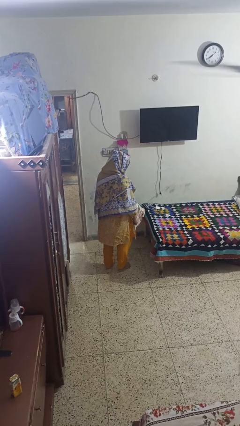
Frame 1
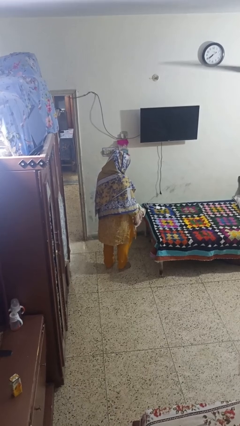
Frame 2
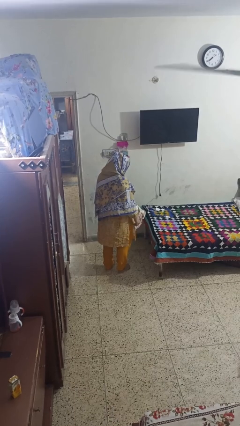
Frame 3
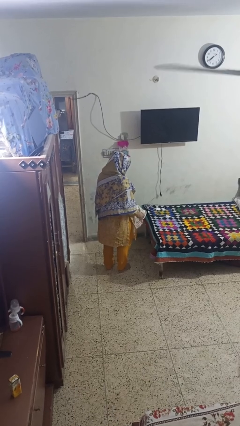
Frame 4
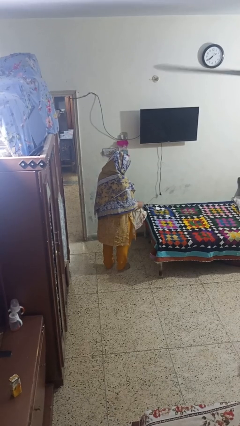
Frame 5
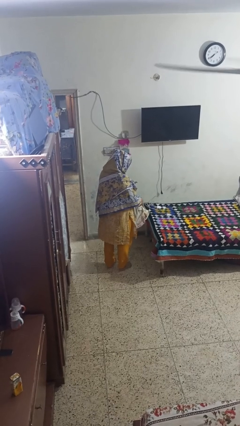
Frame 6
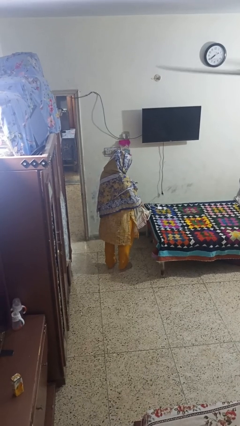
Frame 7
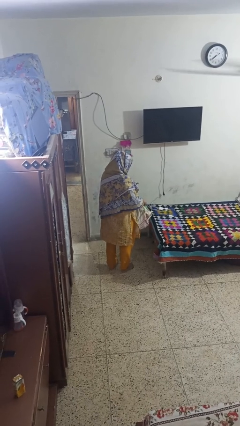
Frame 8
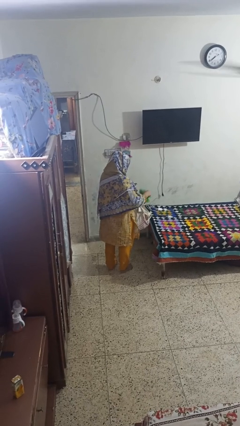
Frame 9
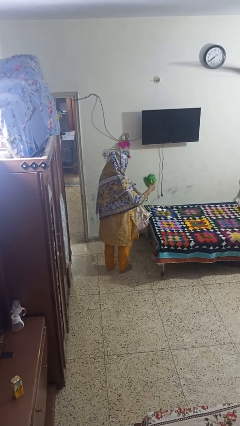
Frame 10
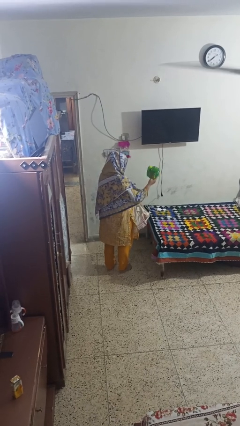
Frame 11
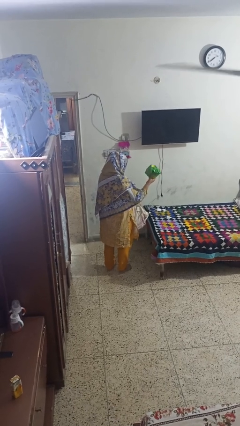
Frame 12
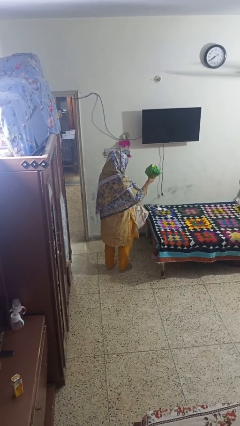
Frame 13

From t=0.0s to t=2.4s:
person takes object from bag

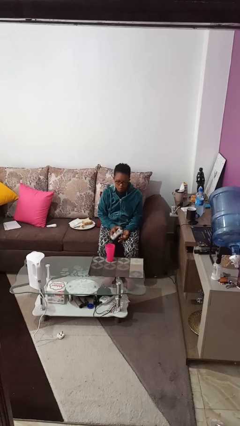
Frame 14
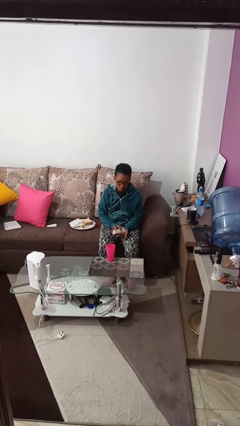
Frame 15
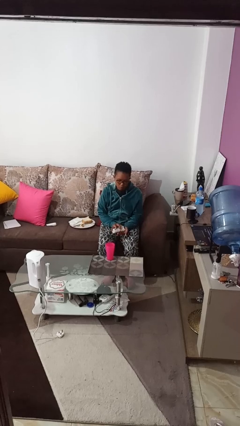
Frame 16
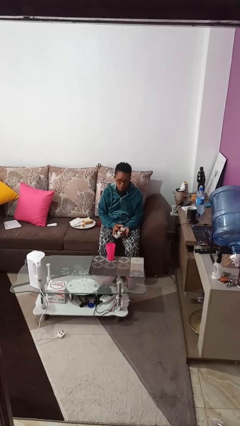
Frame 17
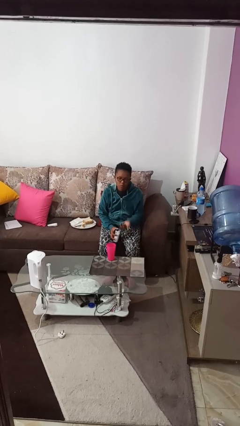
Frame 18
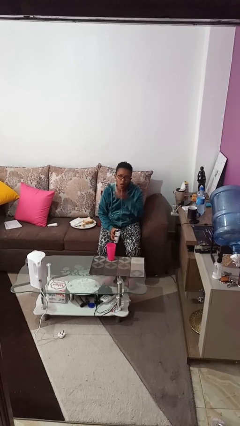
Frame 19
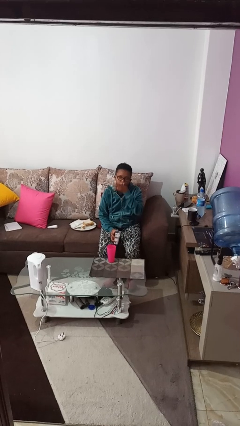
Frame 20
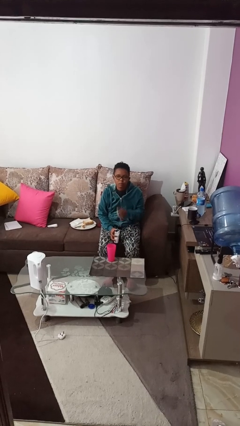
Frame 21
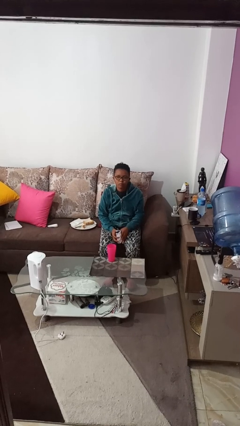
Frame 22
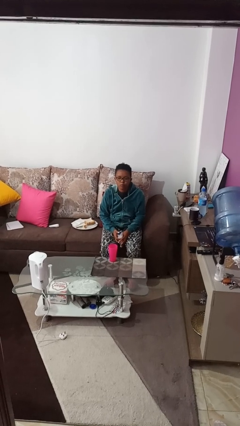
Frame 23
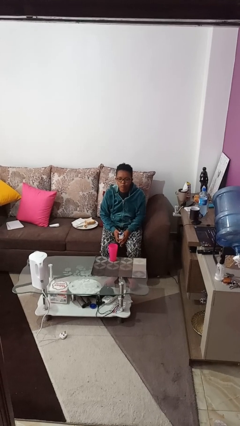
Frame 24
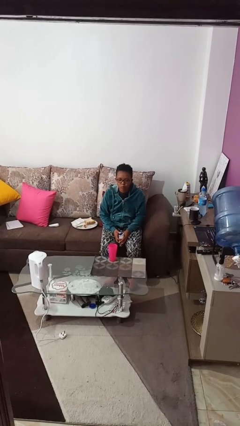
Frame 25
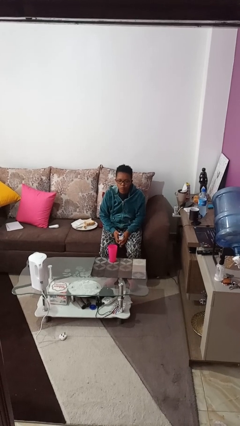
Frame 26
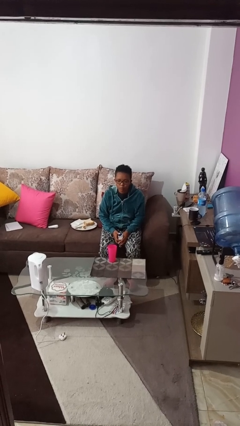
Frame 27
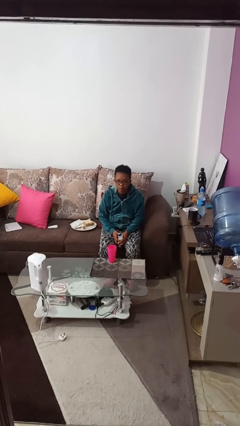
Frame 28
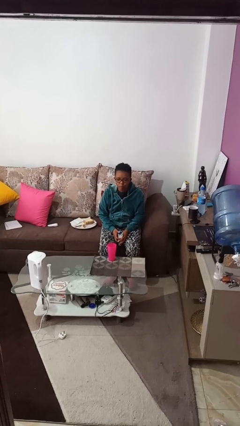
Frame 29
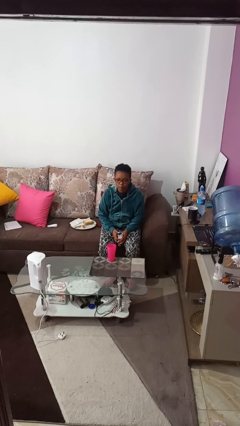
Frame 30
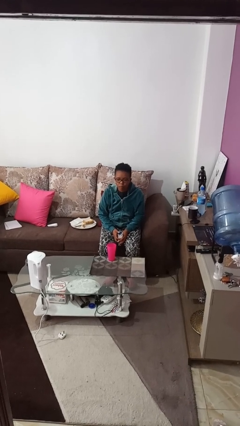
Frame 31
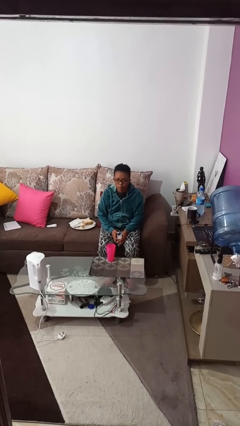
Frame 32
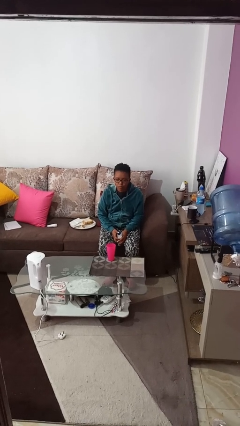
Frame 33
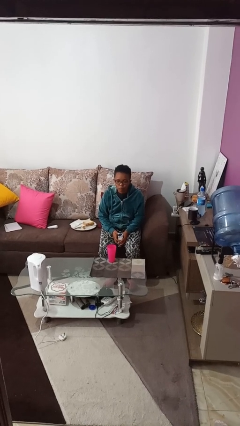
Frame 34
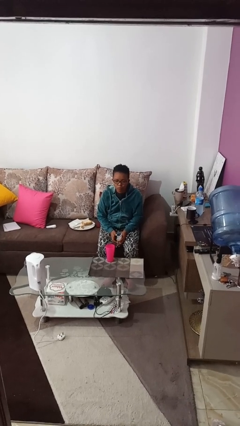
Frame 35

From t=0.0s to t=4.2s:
person takes medicine pills

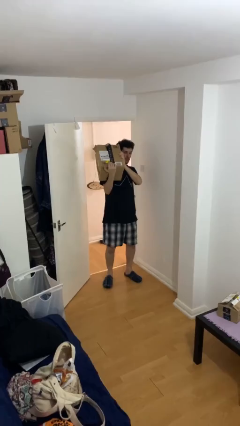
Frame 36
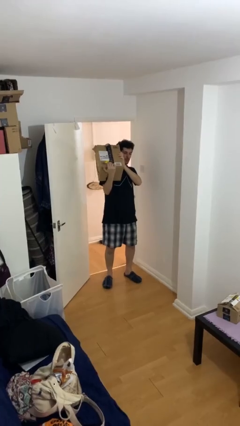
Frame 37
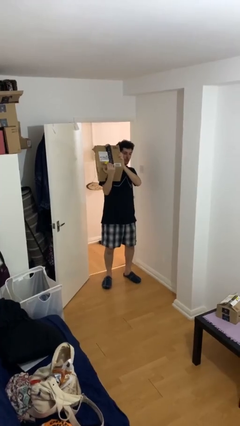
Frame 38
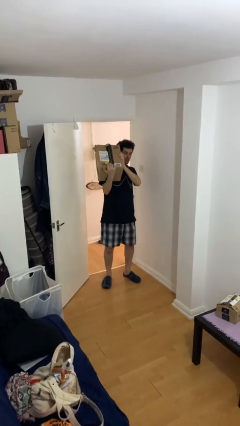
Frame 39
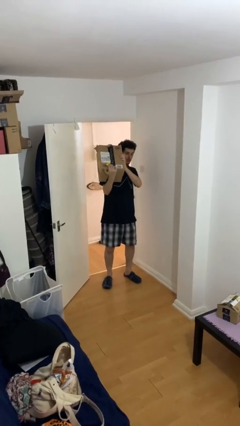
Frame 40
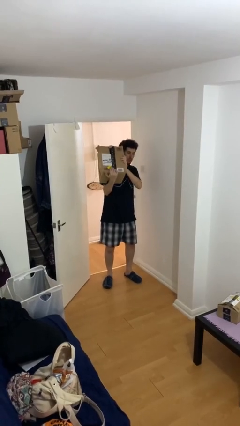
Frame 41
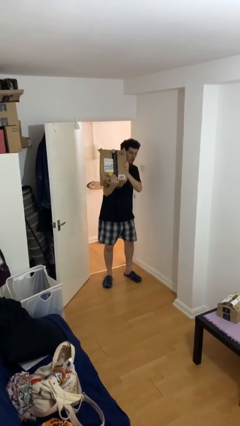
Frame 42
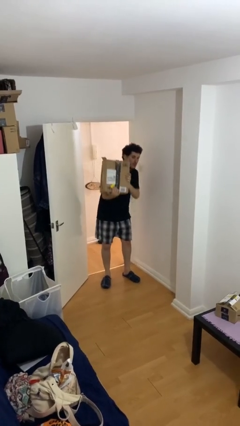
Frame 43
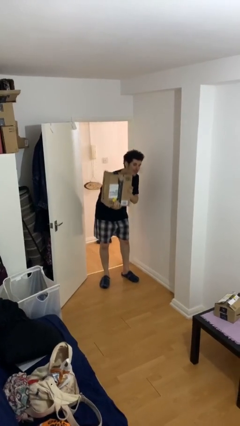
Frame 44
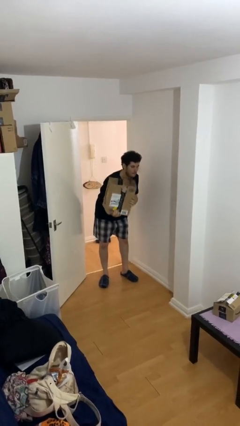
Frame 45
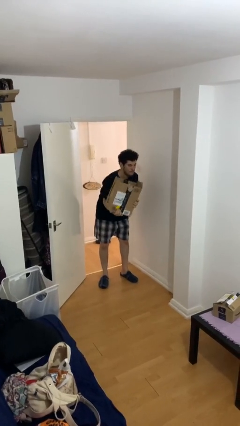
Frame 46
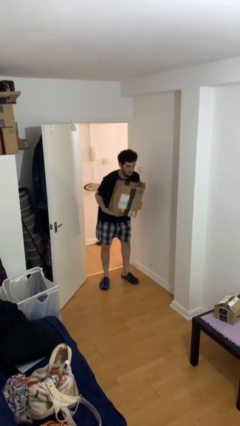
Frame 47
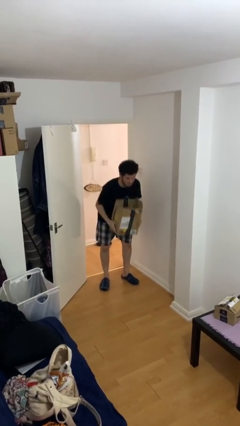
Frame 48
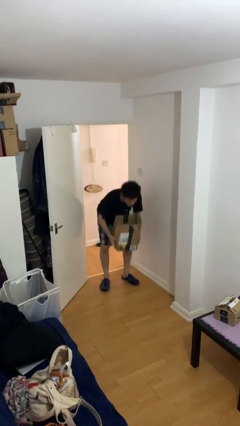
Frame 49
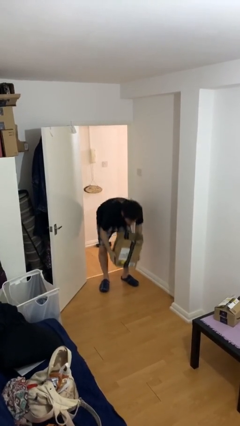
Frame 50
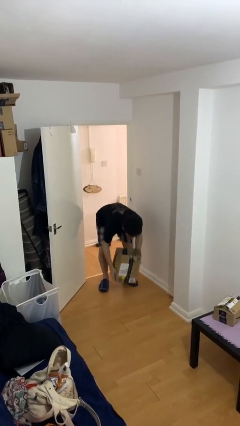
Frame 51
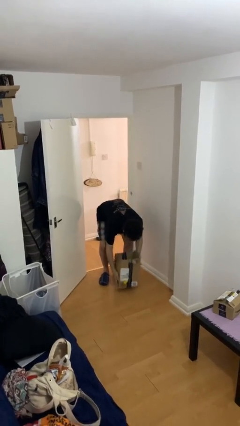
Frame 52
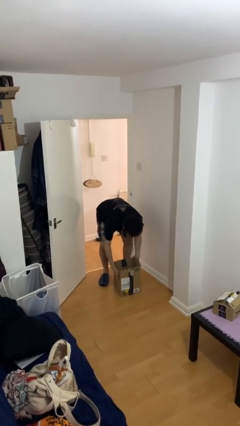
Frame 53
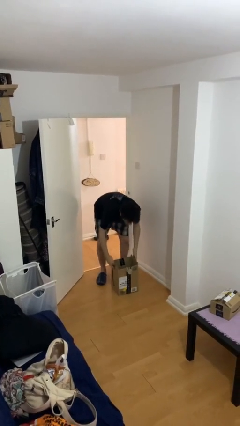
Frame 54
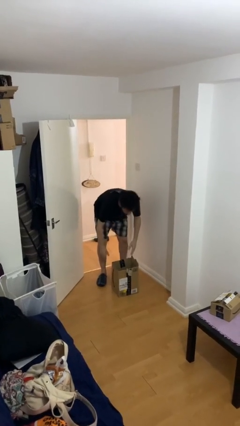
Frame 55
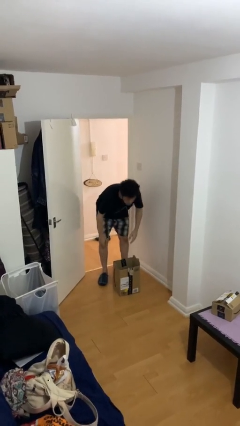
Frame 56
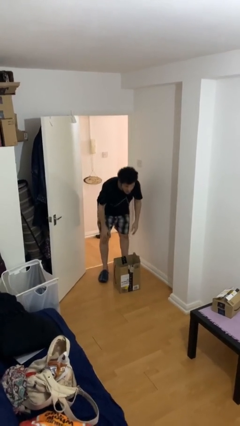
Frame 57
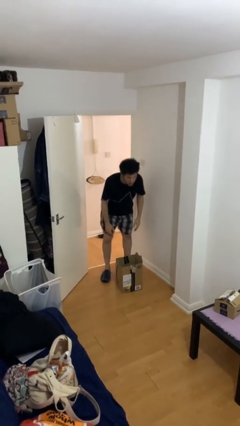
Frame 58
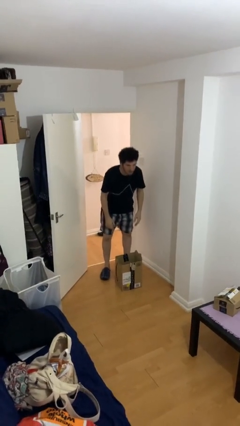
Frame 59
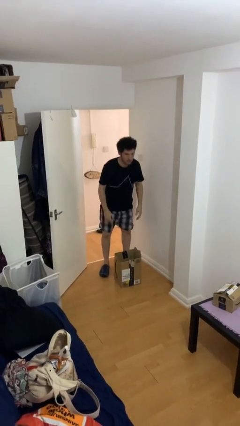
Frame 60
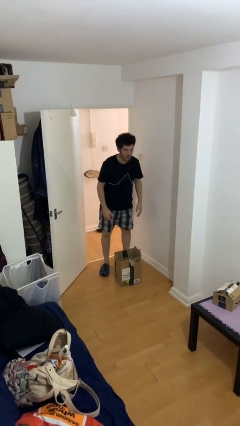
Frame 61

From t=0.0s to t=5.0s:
person puts down object on floor

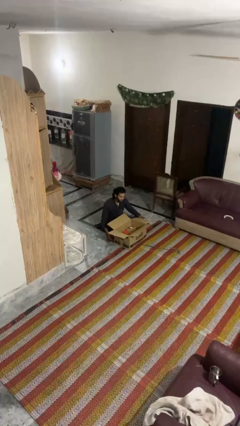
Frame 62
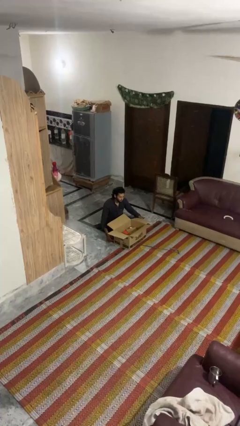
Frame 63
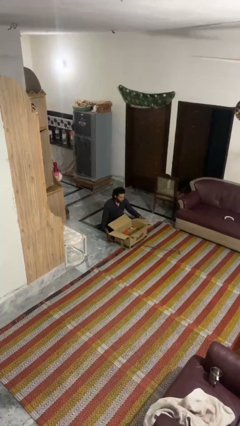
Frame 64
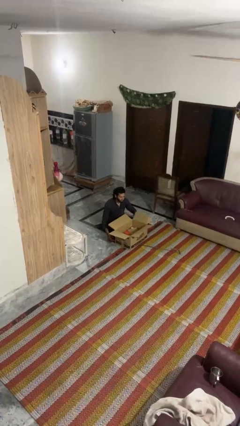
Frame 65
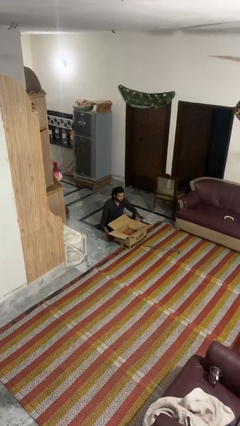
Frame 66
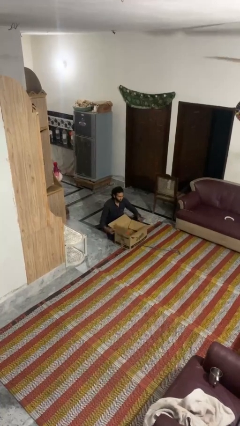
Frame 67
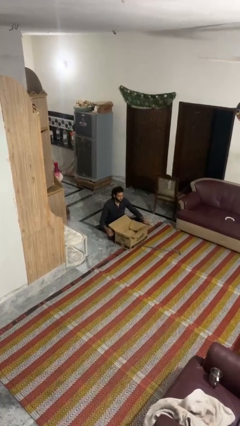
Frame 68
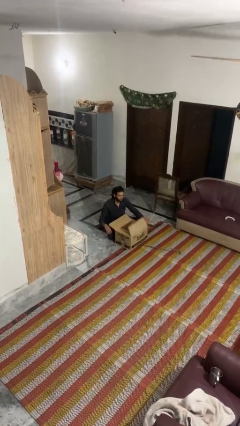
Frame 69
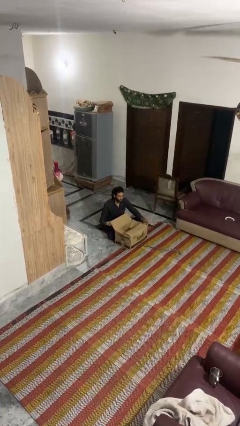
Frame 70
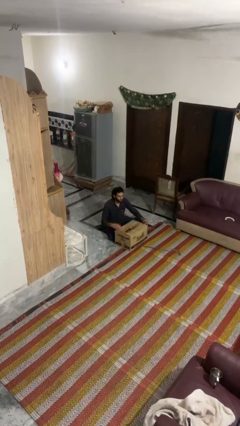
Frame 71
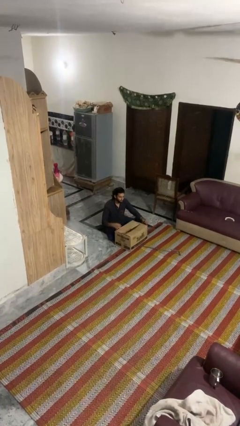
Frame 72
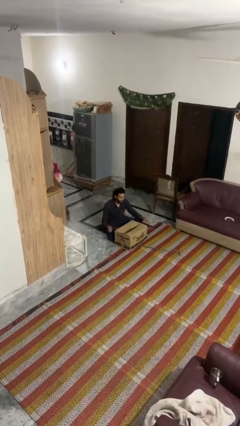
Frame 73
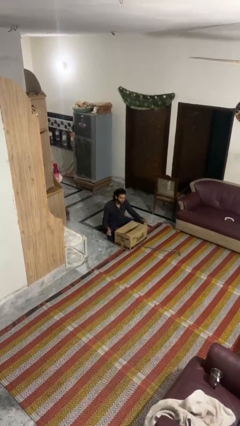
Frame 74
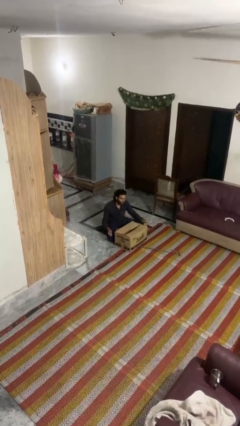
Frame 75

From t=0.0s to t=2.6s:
person closes box

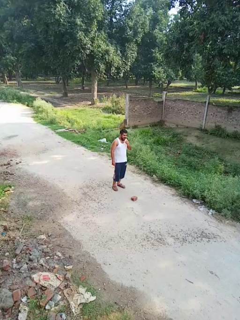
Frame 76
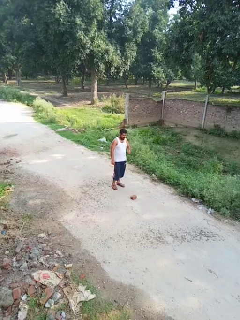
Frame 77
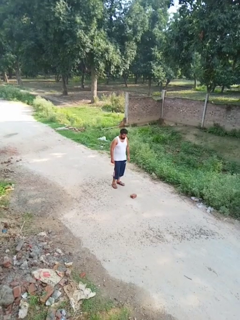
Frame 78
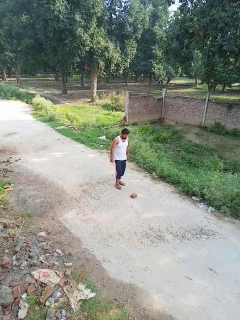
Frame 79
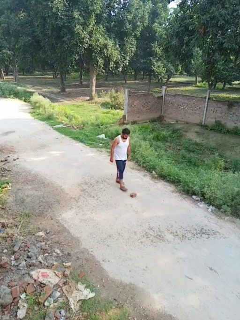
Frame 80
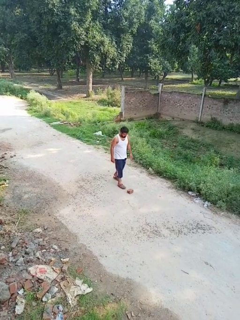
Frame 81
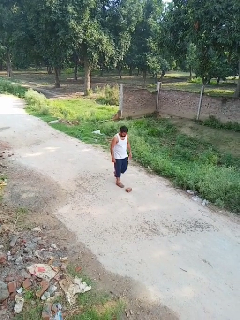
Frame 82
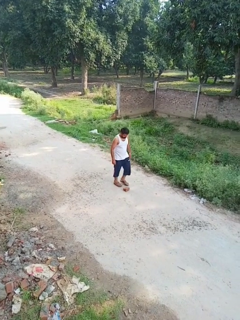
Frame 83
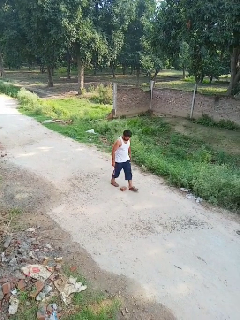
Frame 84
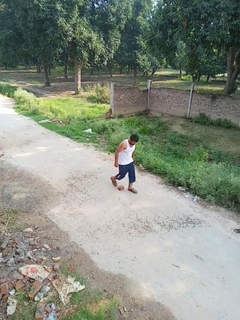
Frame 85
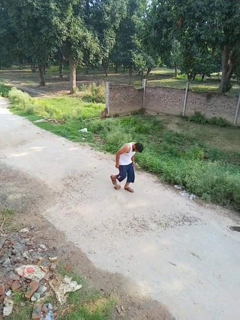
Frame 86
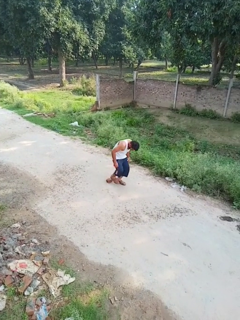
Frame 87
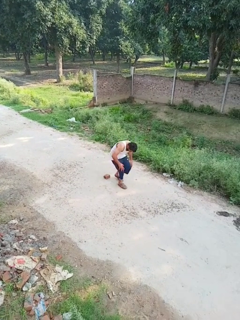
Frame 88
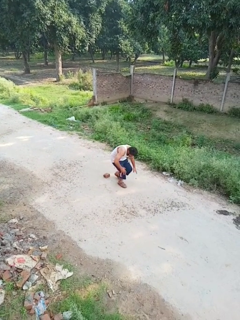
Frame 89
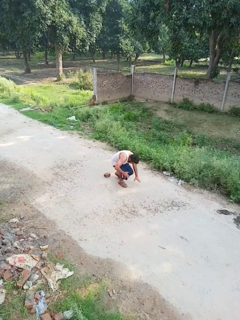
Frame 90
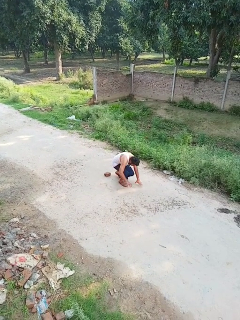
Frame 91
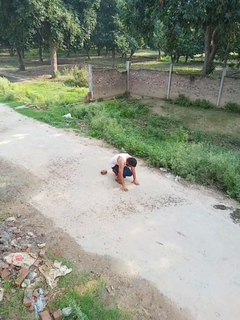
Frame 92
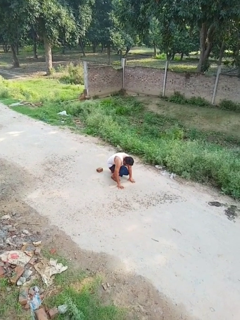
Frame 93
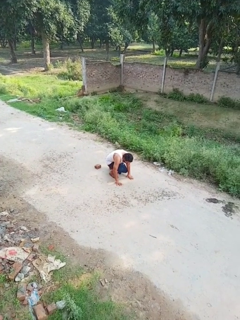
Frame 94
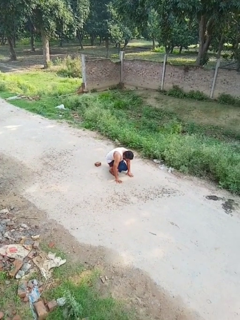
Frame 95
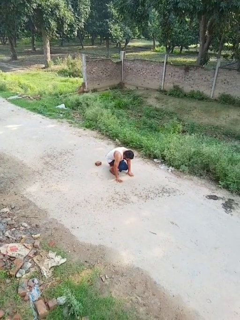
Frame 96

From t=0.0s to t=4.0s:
person trips on object on floor

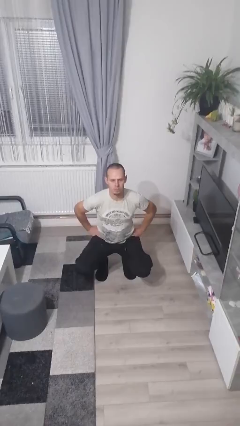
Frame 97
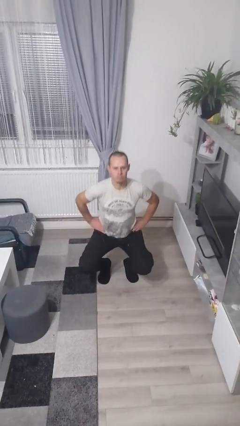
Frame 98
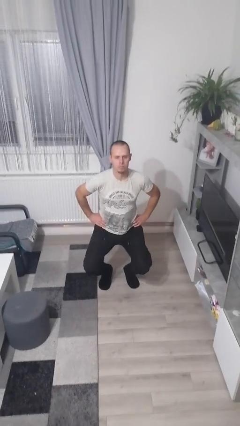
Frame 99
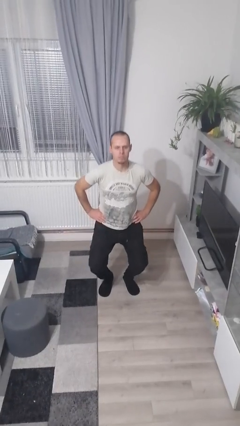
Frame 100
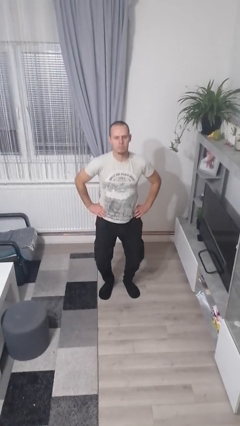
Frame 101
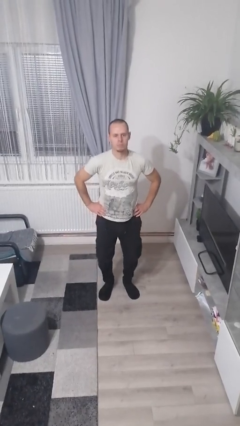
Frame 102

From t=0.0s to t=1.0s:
person stands up
